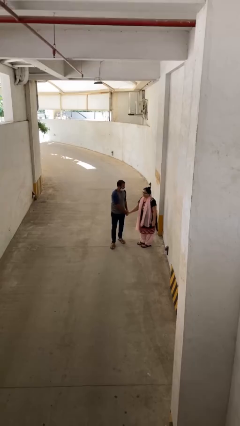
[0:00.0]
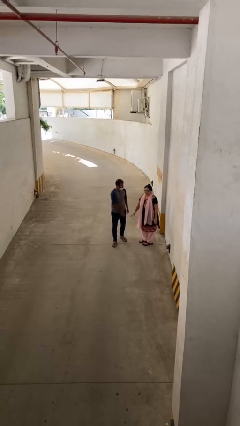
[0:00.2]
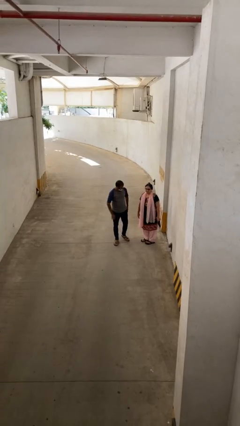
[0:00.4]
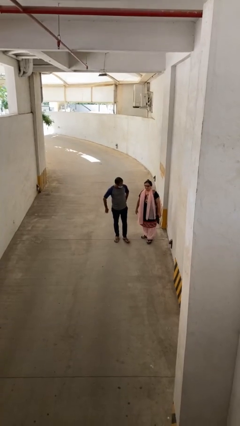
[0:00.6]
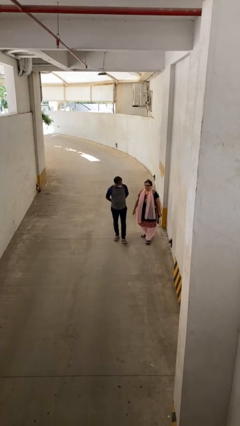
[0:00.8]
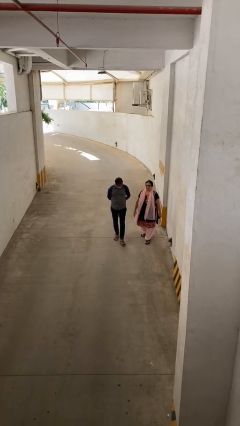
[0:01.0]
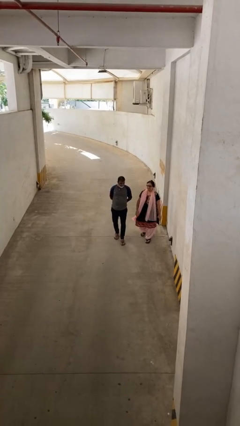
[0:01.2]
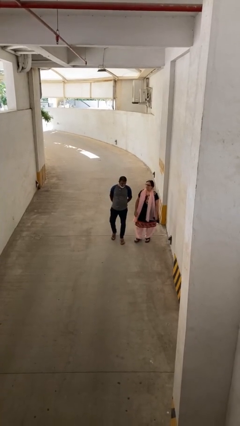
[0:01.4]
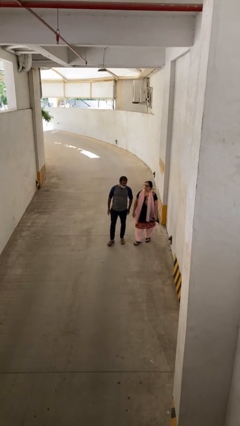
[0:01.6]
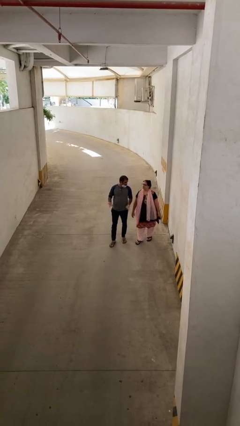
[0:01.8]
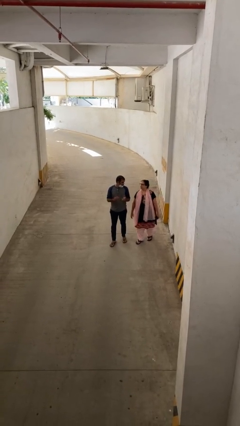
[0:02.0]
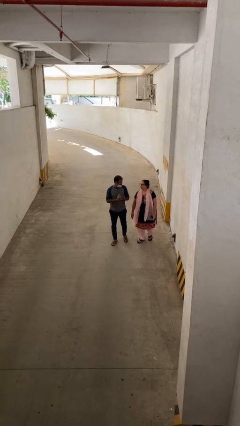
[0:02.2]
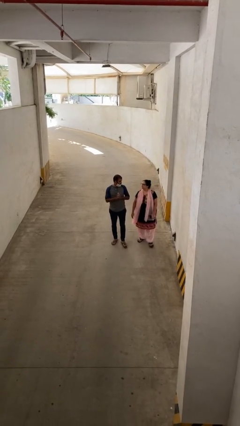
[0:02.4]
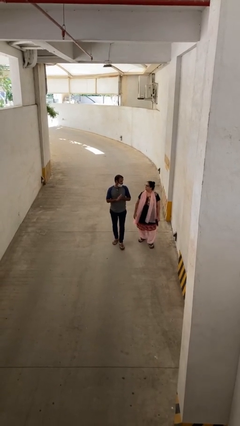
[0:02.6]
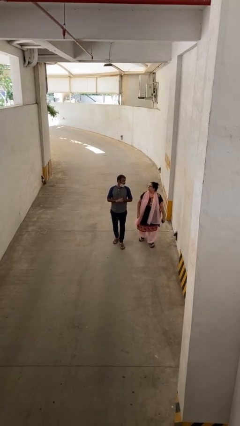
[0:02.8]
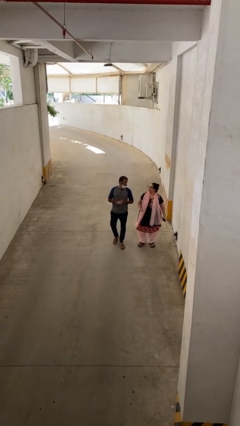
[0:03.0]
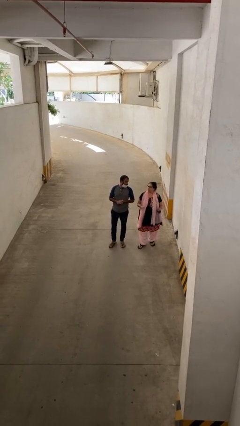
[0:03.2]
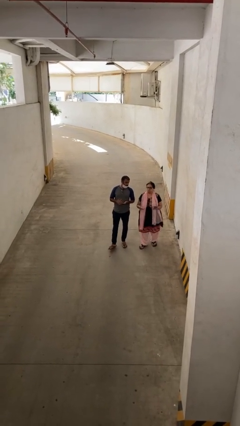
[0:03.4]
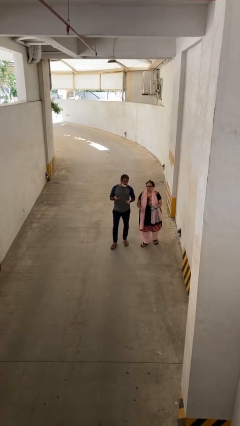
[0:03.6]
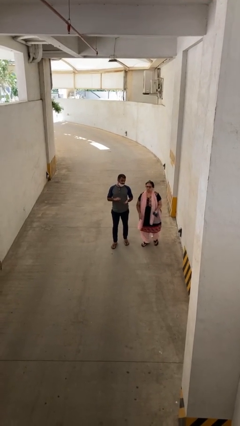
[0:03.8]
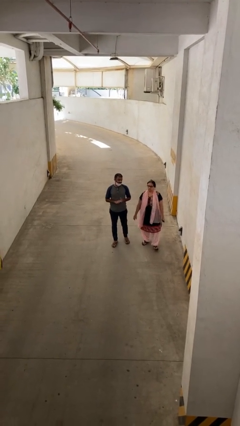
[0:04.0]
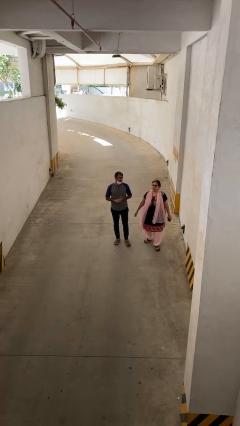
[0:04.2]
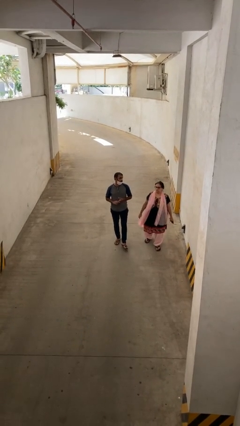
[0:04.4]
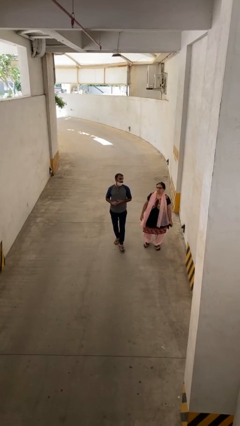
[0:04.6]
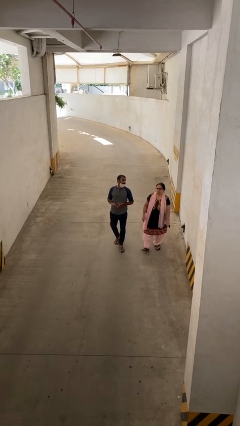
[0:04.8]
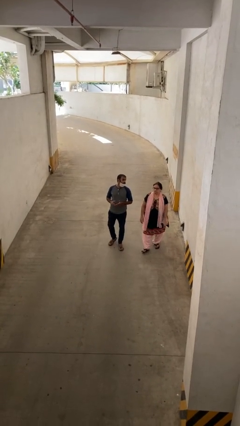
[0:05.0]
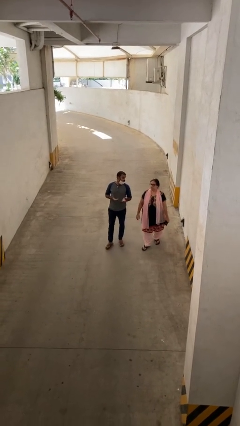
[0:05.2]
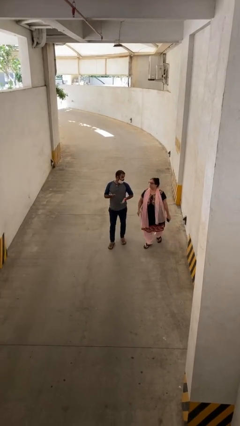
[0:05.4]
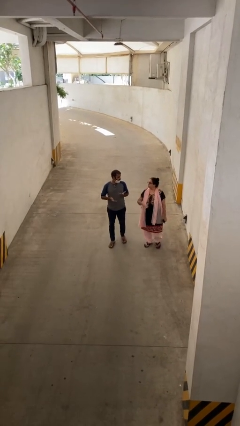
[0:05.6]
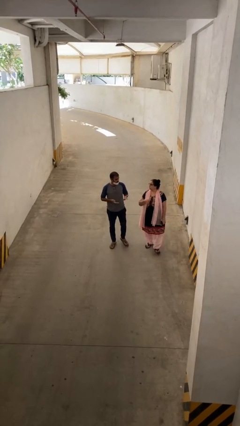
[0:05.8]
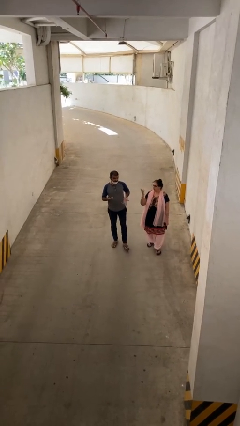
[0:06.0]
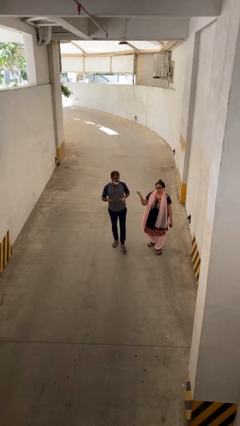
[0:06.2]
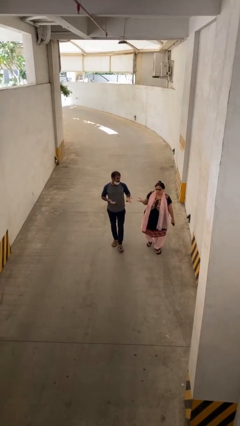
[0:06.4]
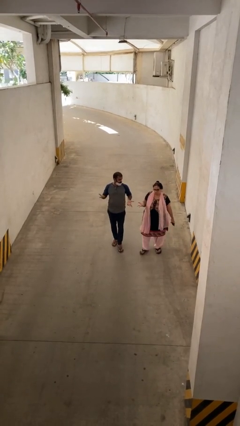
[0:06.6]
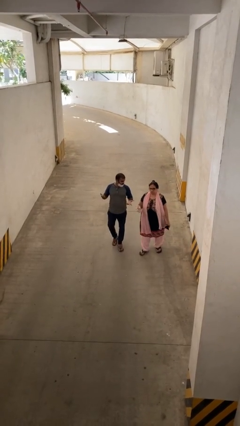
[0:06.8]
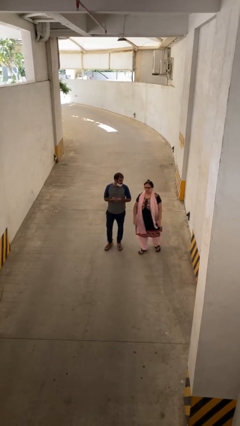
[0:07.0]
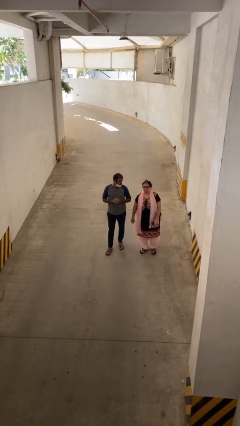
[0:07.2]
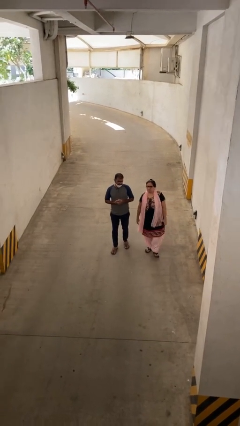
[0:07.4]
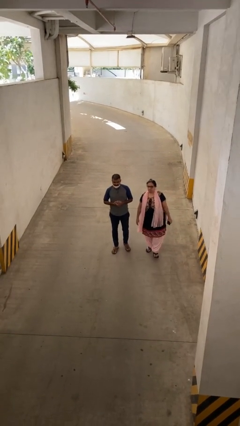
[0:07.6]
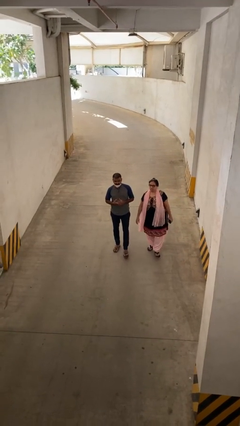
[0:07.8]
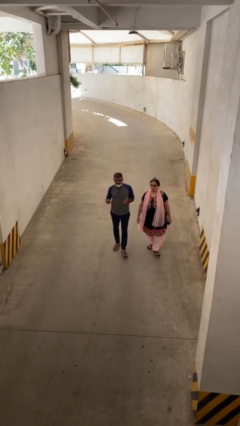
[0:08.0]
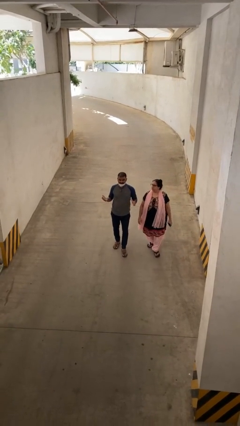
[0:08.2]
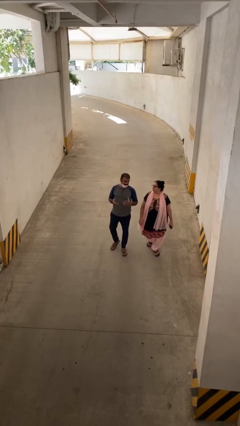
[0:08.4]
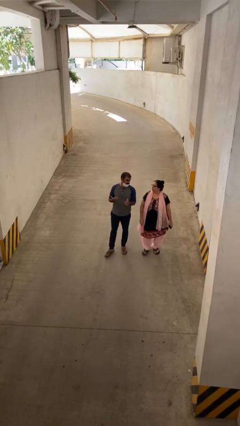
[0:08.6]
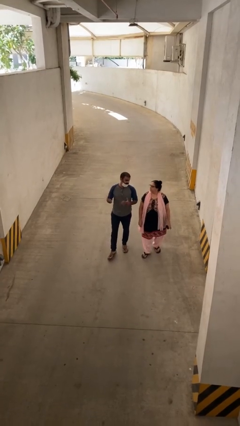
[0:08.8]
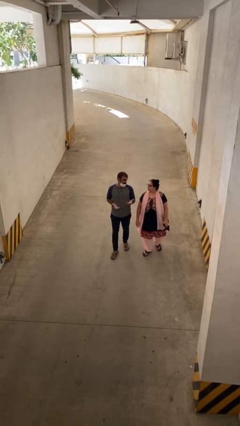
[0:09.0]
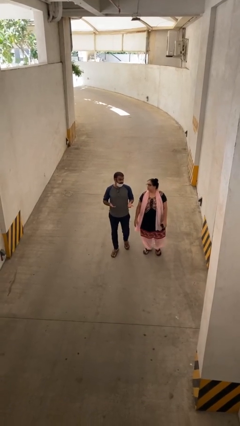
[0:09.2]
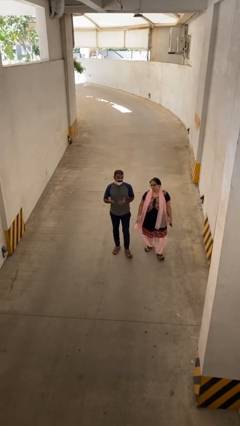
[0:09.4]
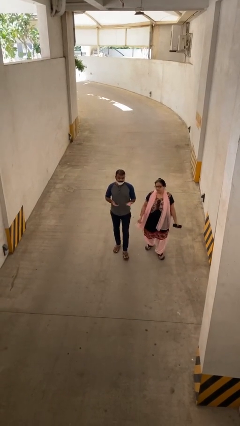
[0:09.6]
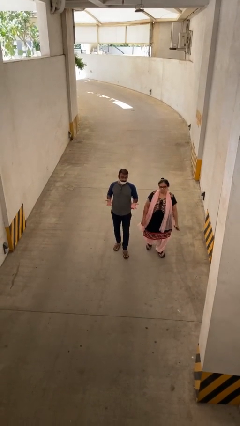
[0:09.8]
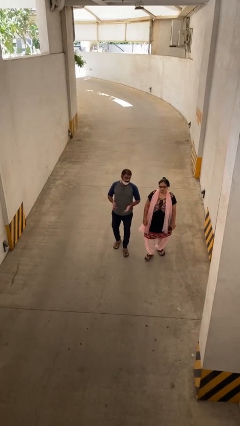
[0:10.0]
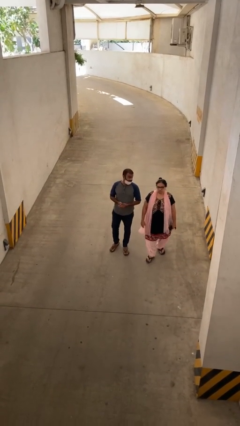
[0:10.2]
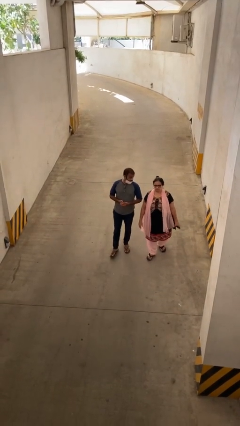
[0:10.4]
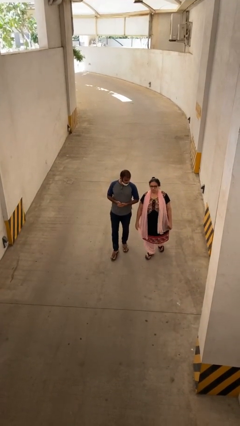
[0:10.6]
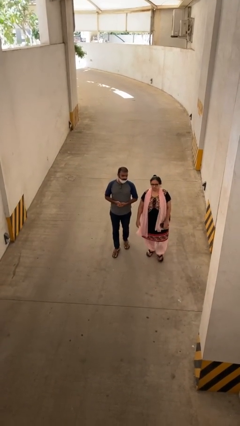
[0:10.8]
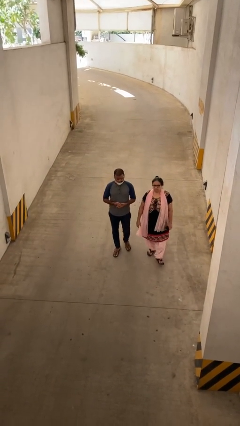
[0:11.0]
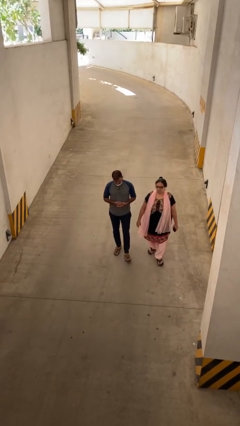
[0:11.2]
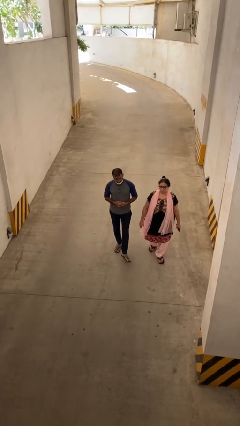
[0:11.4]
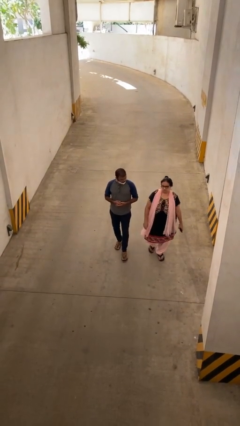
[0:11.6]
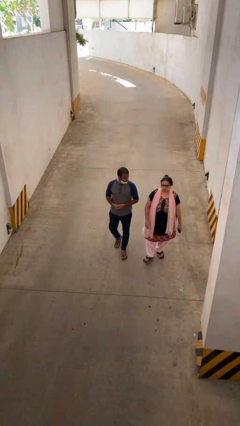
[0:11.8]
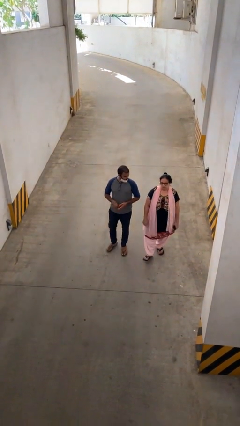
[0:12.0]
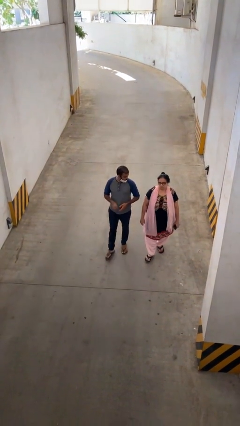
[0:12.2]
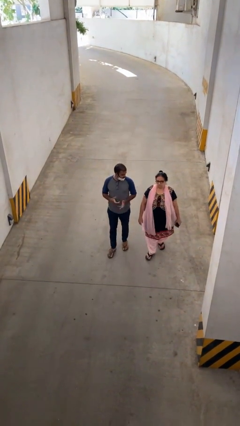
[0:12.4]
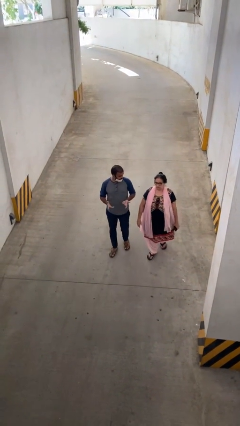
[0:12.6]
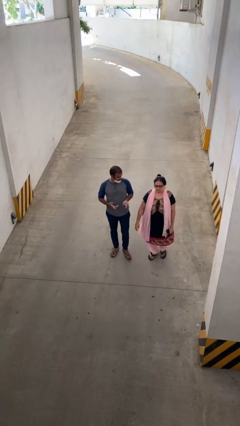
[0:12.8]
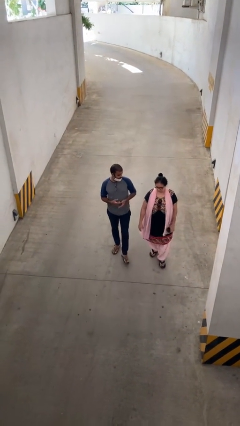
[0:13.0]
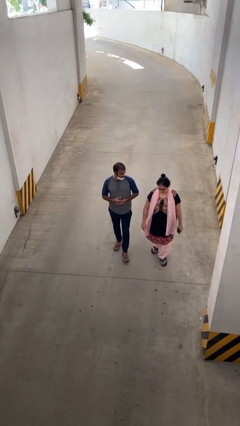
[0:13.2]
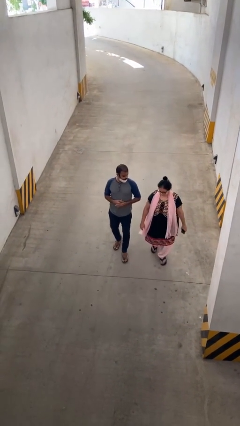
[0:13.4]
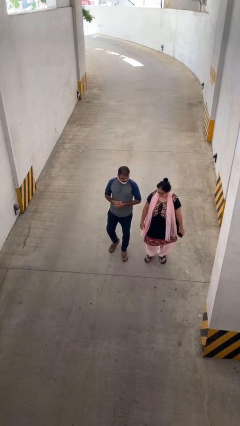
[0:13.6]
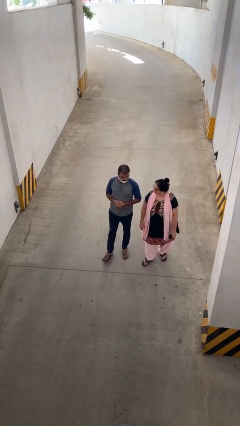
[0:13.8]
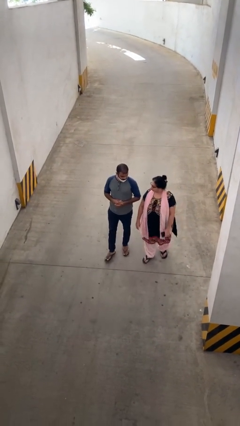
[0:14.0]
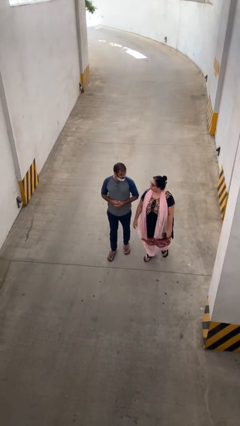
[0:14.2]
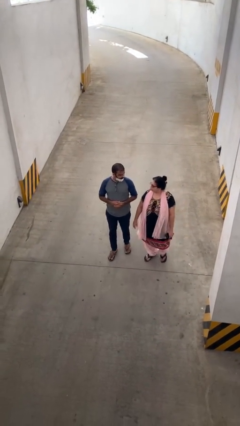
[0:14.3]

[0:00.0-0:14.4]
person talks to person

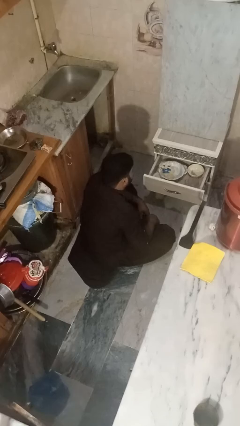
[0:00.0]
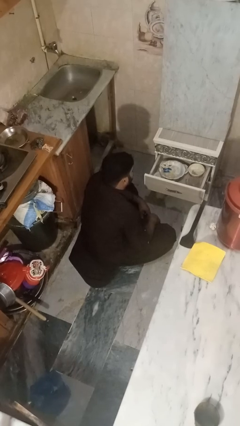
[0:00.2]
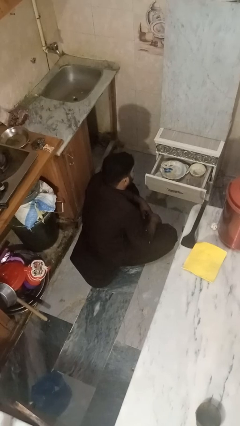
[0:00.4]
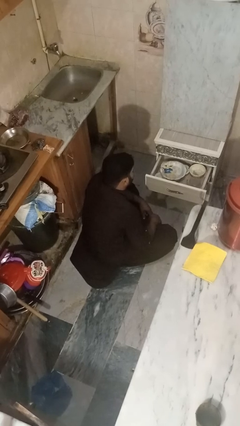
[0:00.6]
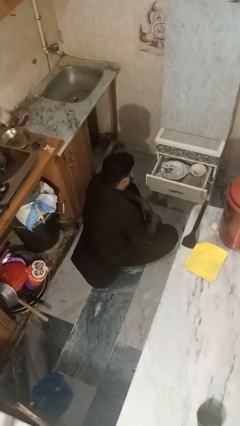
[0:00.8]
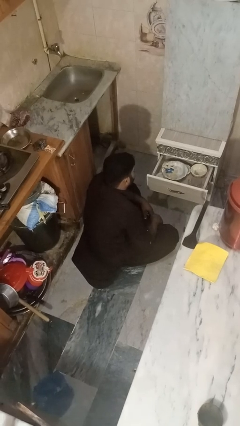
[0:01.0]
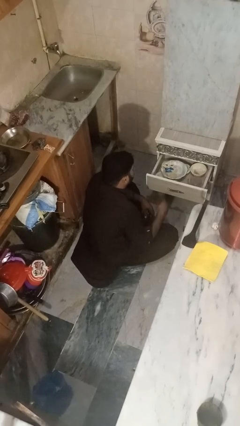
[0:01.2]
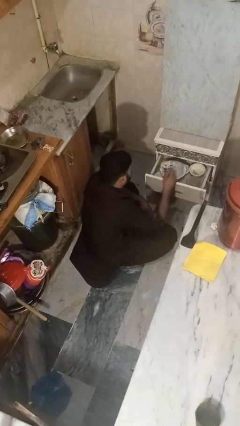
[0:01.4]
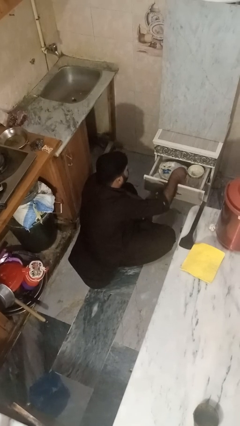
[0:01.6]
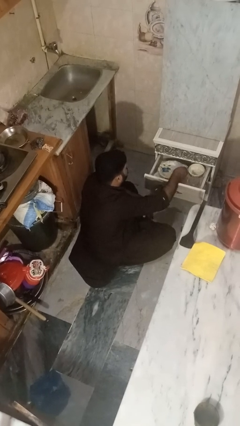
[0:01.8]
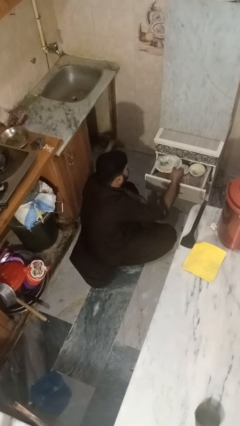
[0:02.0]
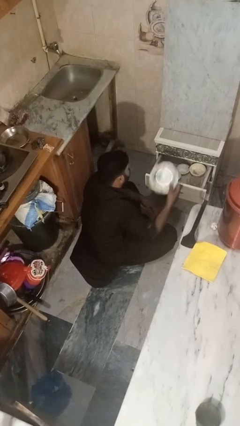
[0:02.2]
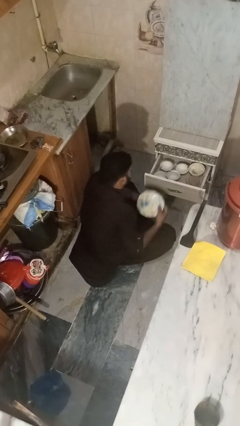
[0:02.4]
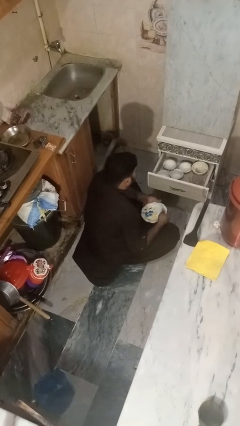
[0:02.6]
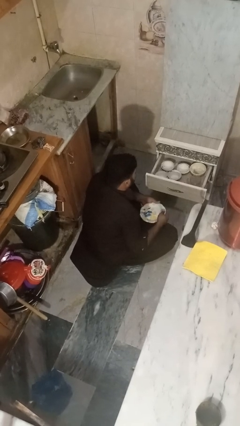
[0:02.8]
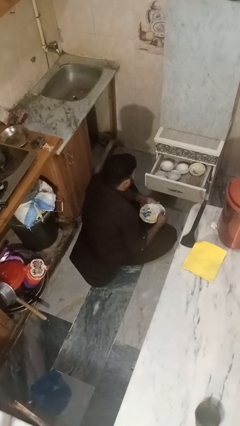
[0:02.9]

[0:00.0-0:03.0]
person takes object from kitchen drawer

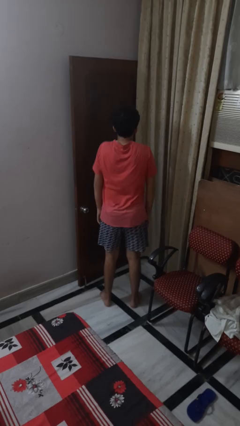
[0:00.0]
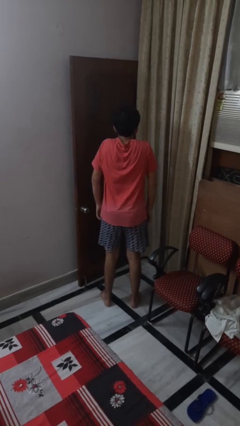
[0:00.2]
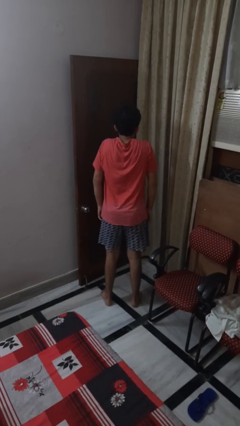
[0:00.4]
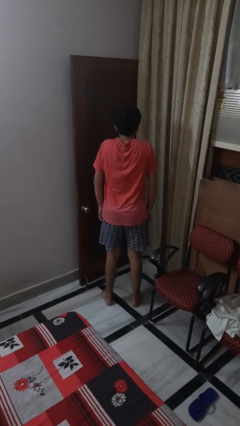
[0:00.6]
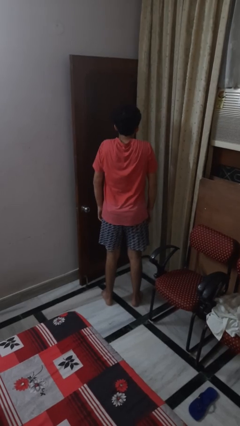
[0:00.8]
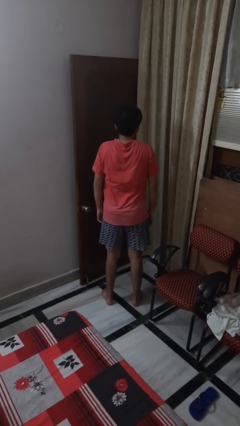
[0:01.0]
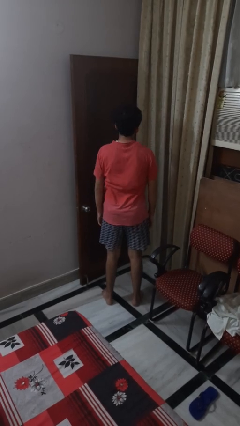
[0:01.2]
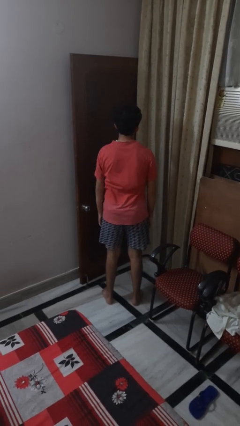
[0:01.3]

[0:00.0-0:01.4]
person shrugs
